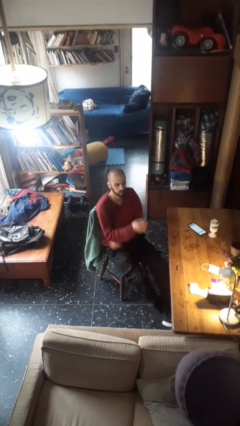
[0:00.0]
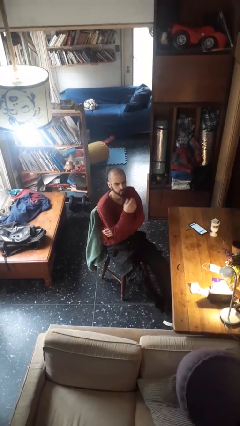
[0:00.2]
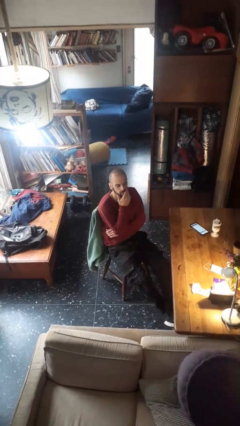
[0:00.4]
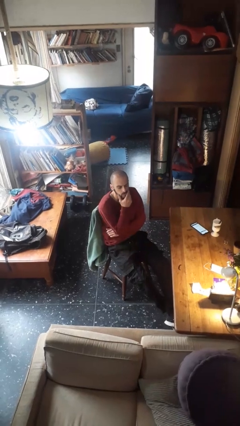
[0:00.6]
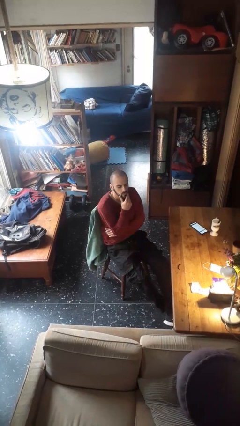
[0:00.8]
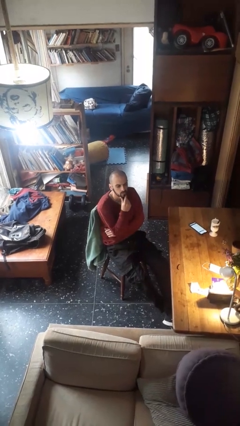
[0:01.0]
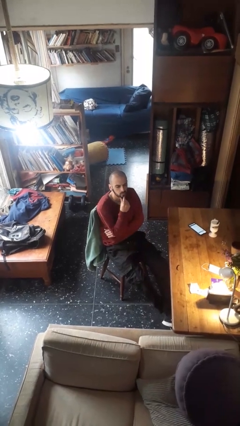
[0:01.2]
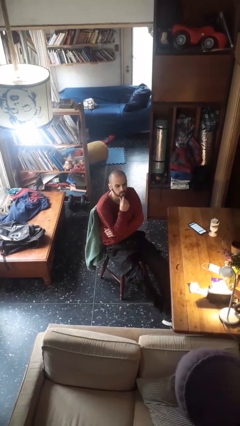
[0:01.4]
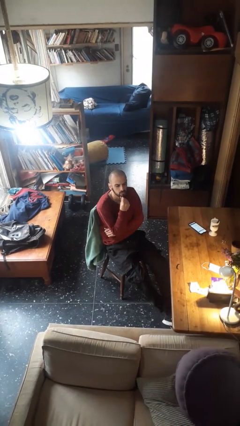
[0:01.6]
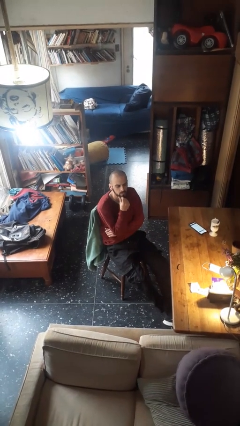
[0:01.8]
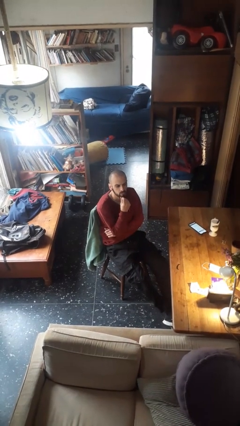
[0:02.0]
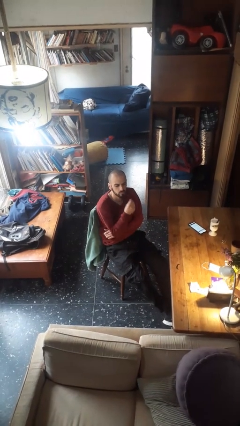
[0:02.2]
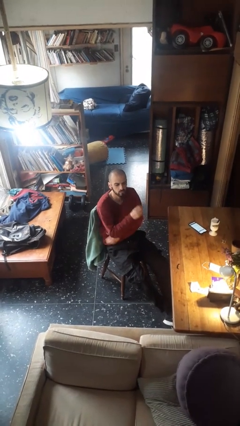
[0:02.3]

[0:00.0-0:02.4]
person strokes chin

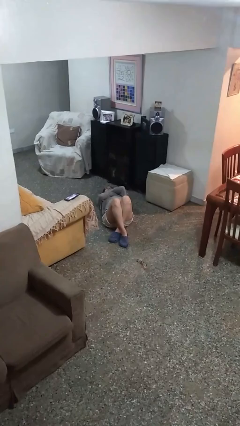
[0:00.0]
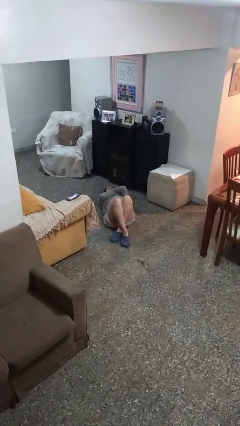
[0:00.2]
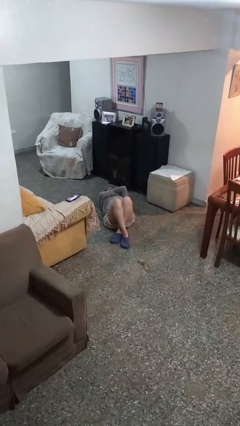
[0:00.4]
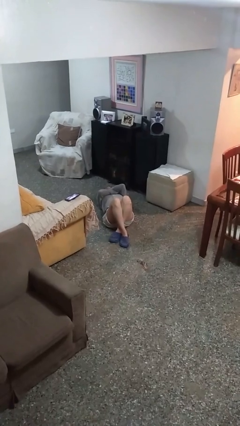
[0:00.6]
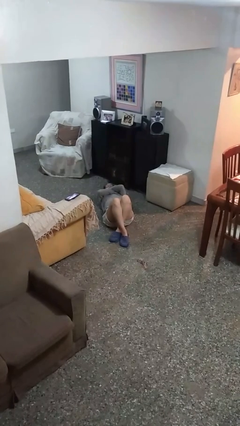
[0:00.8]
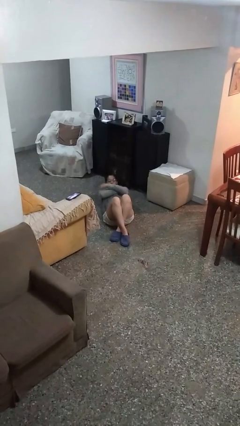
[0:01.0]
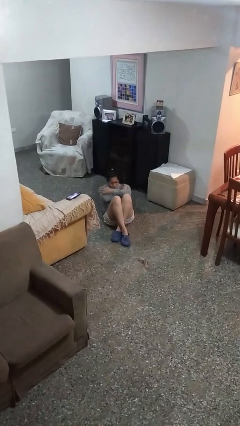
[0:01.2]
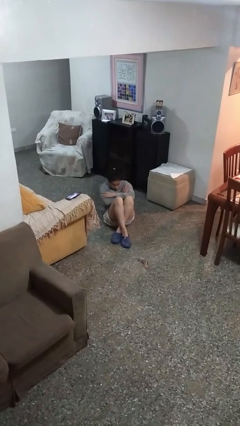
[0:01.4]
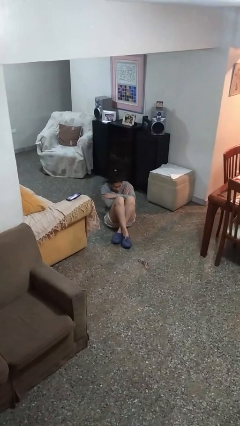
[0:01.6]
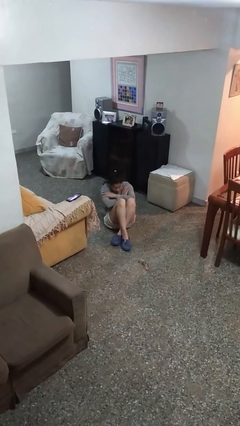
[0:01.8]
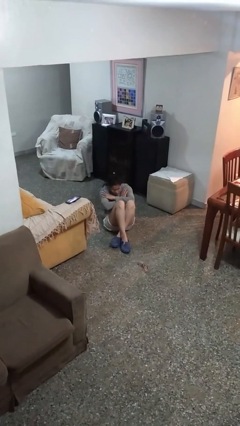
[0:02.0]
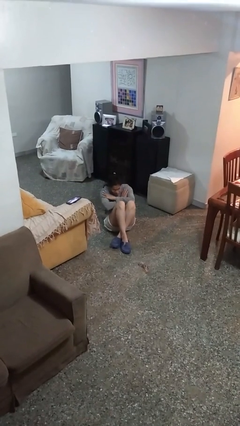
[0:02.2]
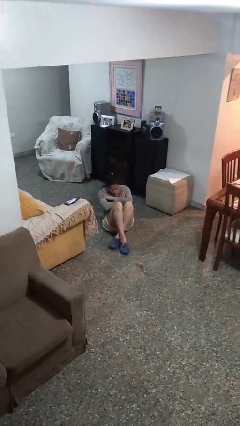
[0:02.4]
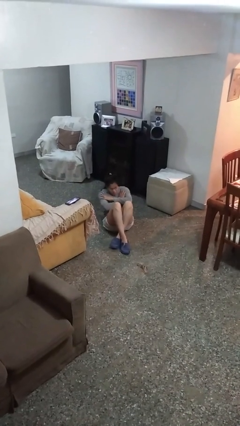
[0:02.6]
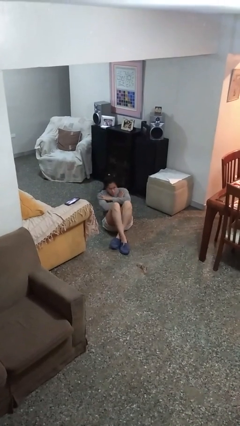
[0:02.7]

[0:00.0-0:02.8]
person exercises with situp

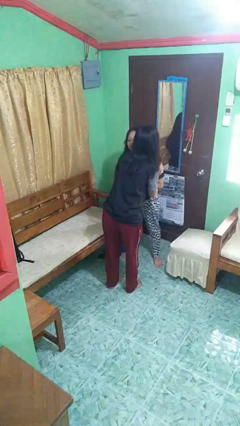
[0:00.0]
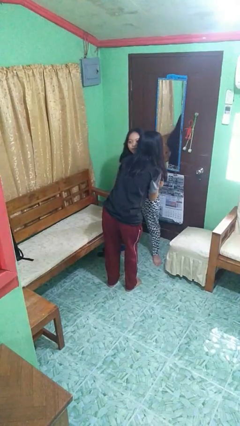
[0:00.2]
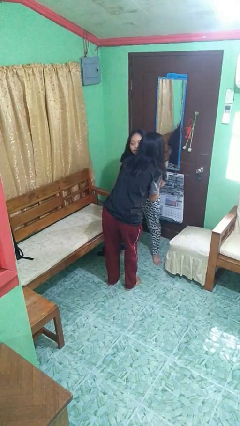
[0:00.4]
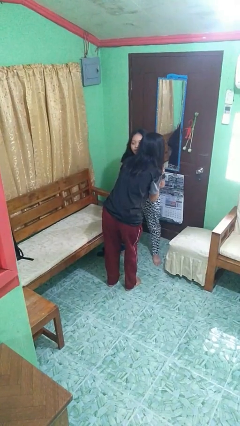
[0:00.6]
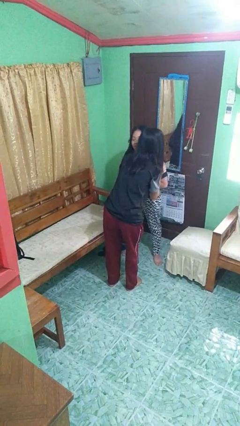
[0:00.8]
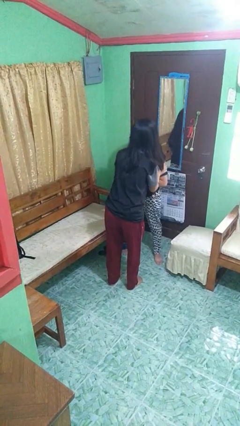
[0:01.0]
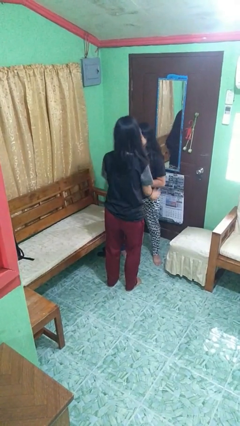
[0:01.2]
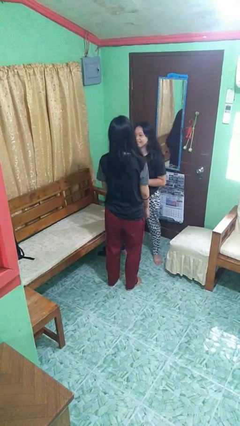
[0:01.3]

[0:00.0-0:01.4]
person kisses cheek of person

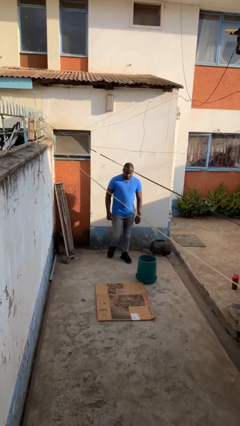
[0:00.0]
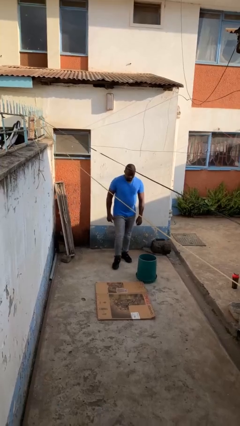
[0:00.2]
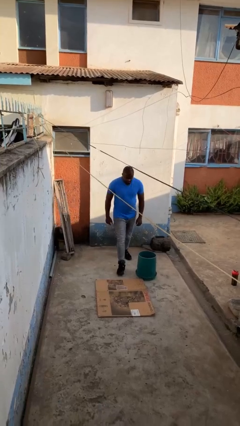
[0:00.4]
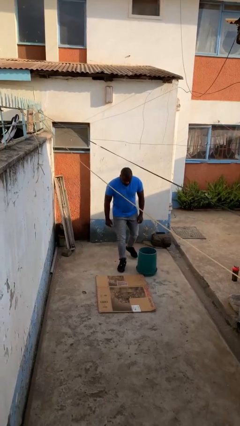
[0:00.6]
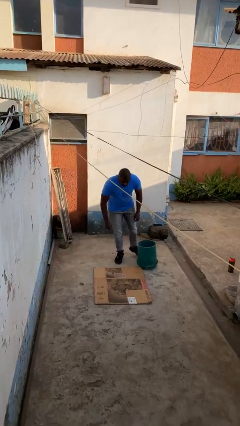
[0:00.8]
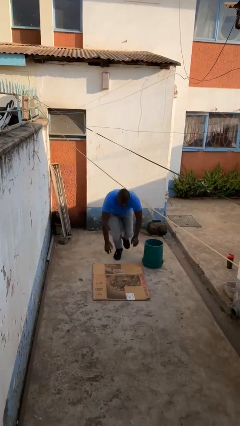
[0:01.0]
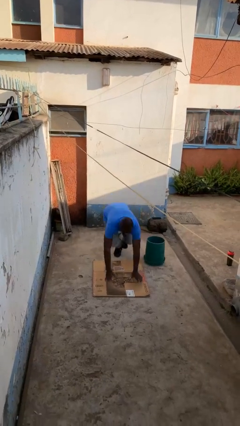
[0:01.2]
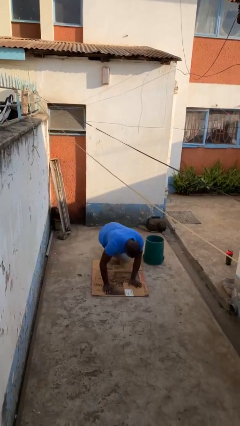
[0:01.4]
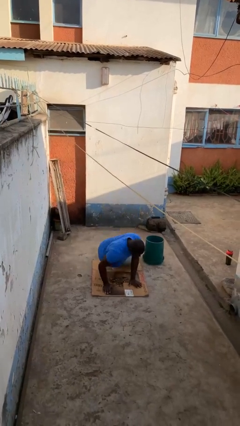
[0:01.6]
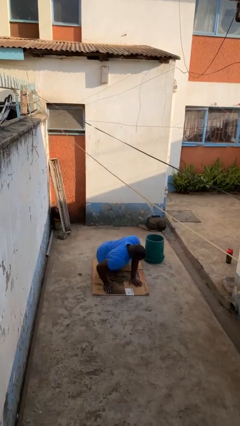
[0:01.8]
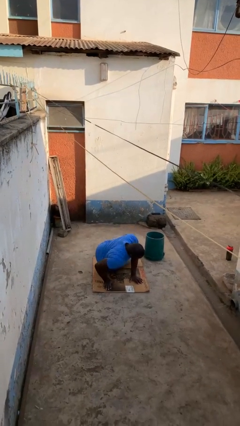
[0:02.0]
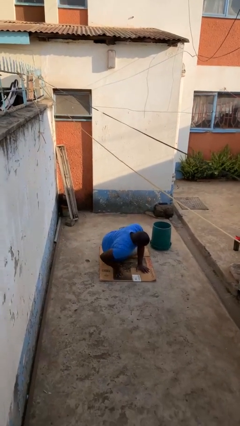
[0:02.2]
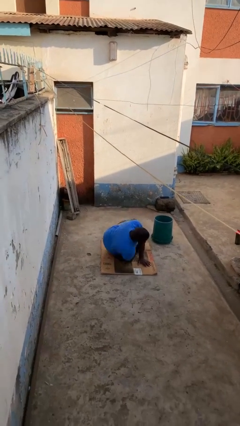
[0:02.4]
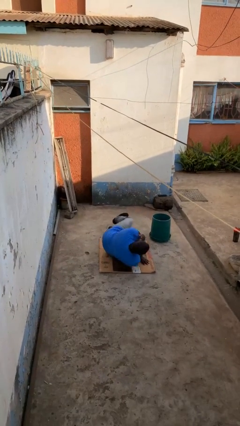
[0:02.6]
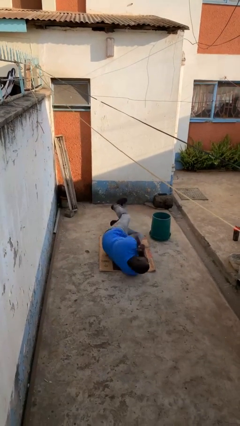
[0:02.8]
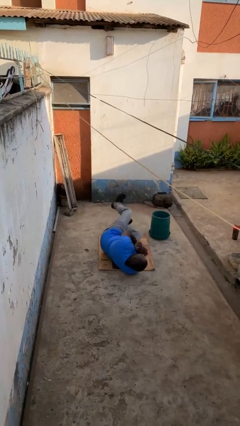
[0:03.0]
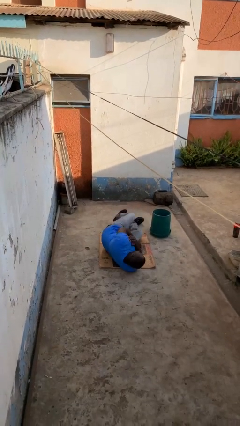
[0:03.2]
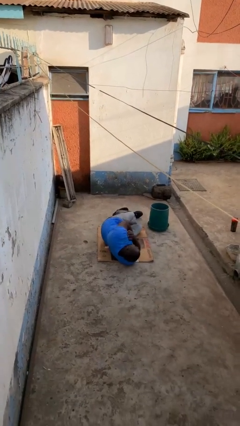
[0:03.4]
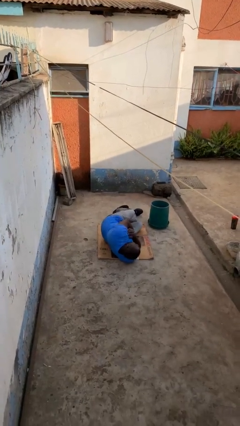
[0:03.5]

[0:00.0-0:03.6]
person trips on object on floor

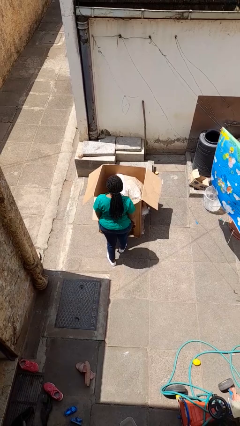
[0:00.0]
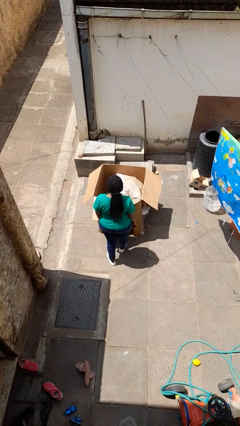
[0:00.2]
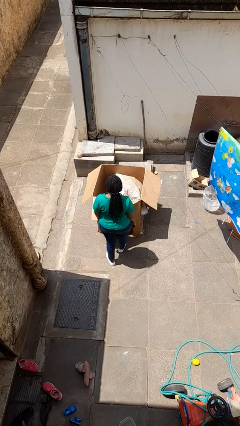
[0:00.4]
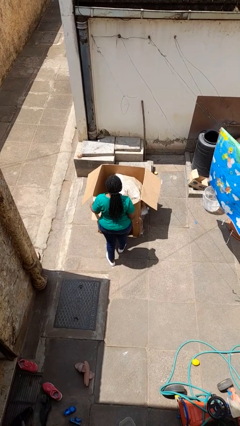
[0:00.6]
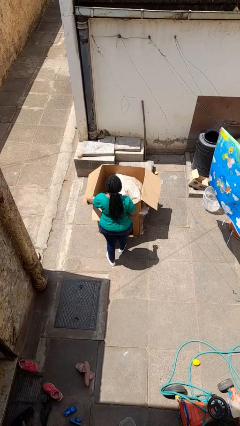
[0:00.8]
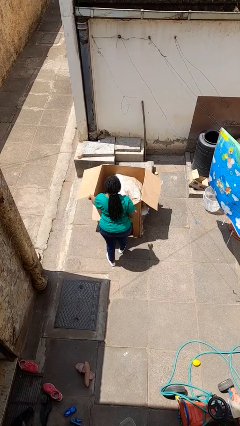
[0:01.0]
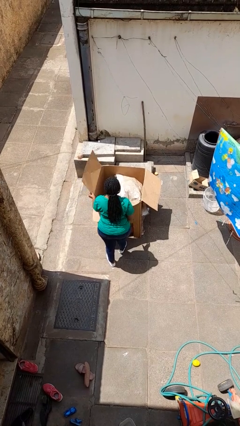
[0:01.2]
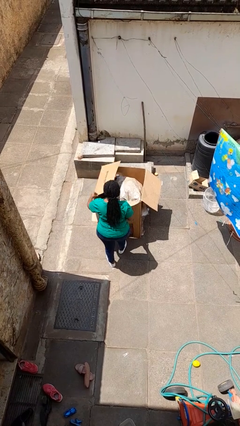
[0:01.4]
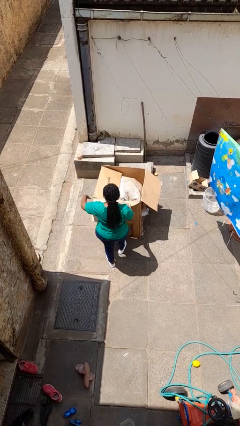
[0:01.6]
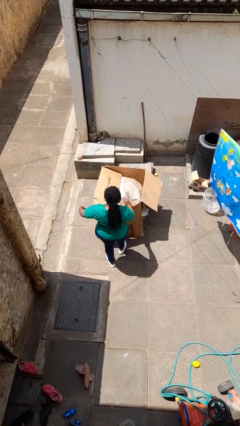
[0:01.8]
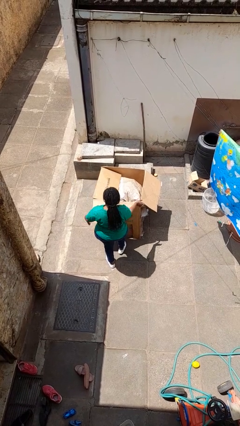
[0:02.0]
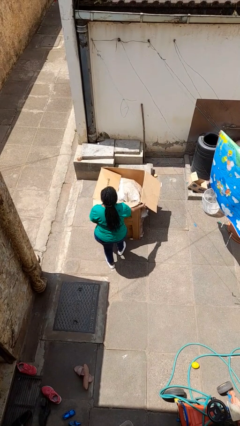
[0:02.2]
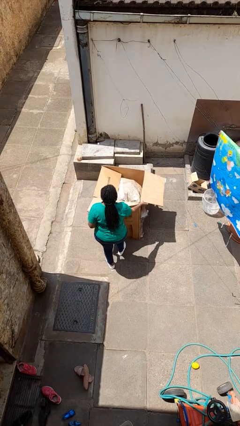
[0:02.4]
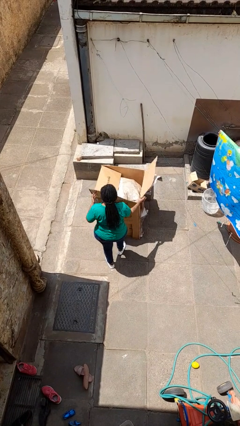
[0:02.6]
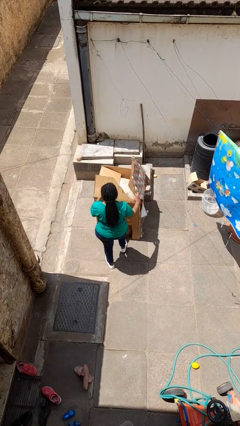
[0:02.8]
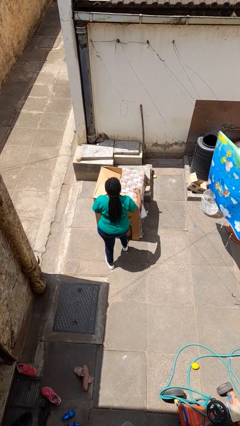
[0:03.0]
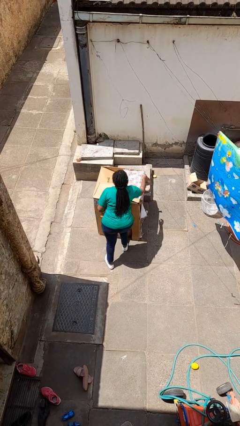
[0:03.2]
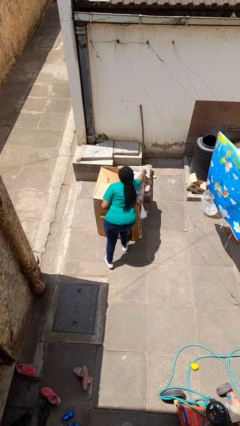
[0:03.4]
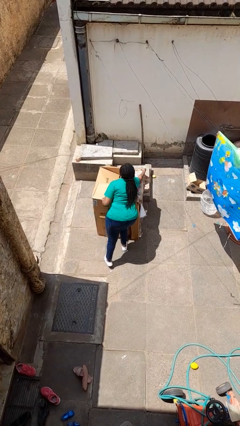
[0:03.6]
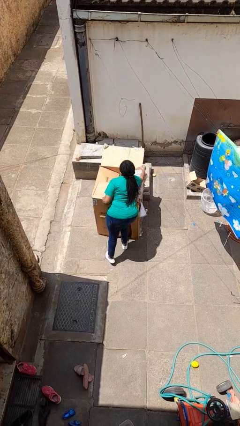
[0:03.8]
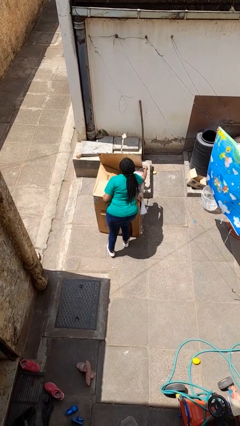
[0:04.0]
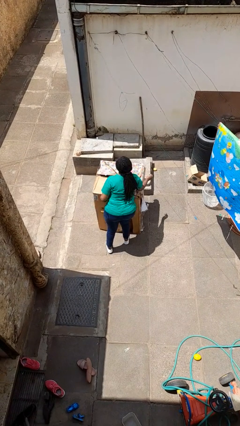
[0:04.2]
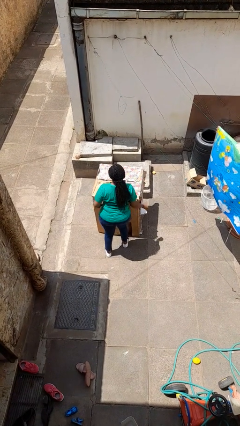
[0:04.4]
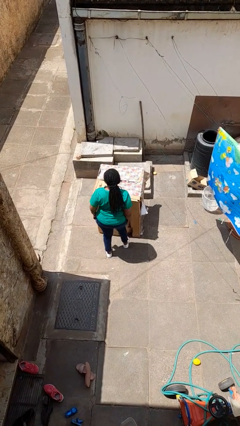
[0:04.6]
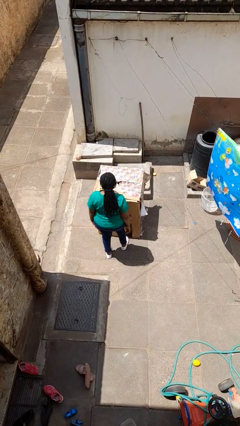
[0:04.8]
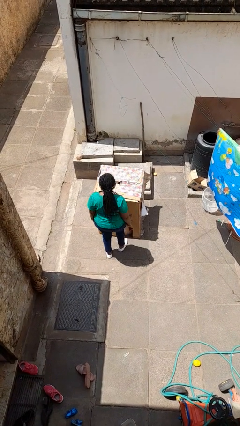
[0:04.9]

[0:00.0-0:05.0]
person closes box

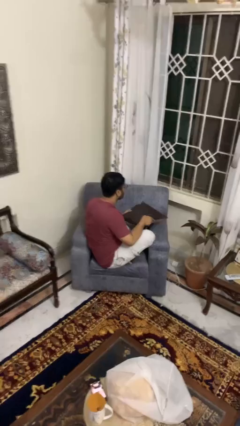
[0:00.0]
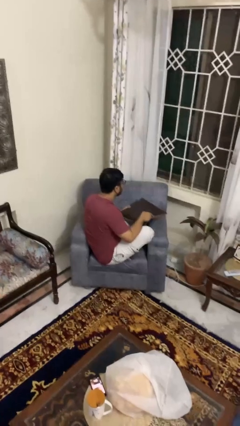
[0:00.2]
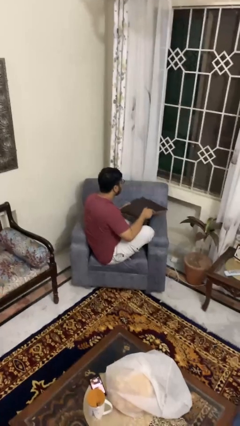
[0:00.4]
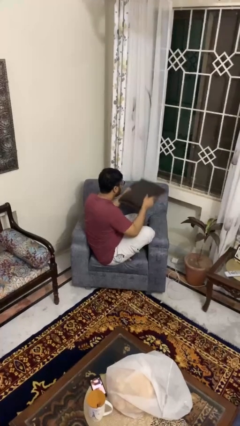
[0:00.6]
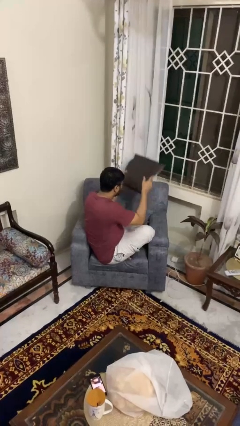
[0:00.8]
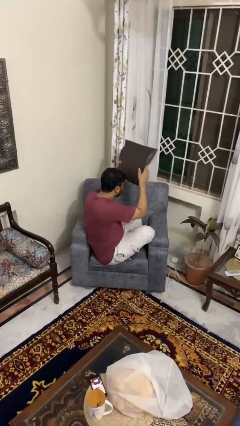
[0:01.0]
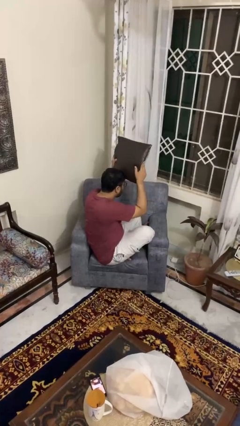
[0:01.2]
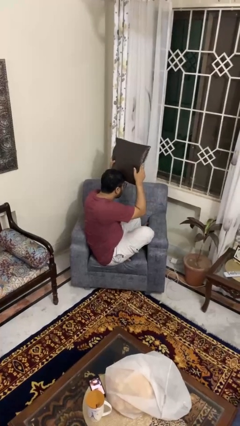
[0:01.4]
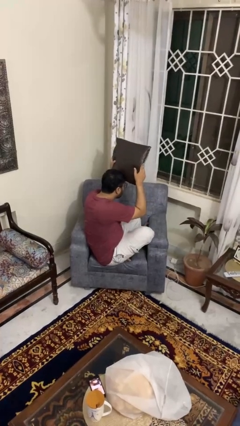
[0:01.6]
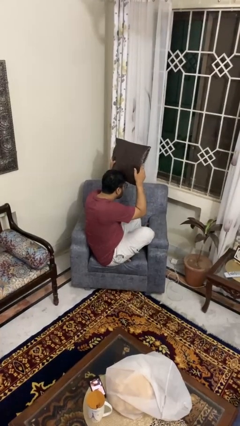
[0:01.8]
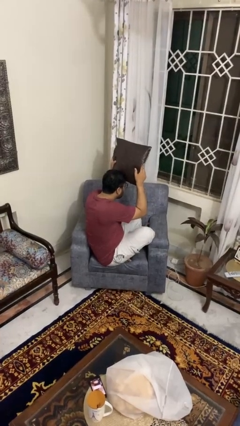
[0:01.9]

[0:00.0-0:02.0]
person holds object above head

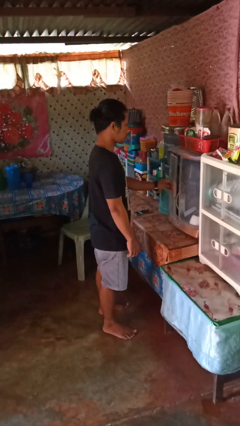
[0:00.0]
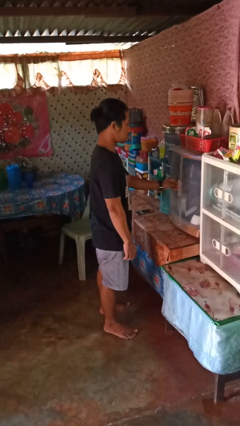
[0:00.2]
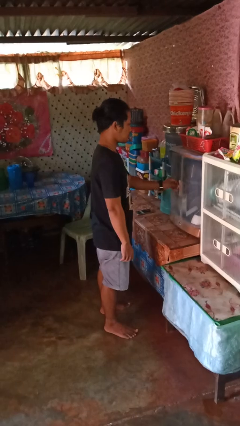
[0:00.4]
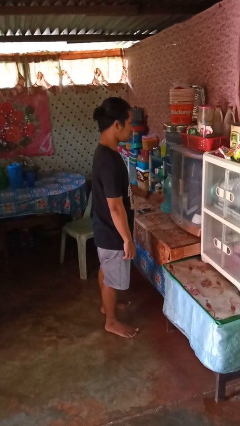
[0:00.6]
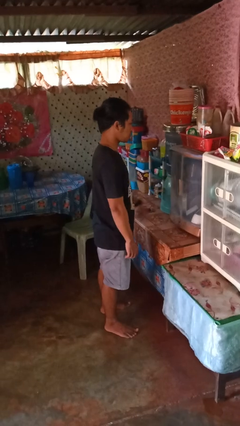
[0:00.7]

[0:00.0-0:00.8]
person closes cabinet
